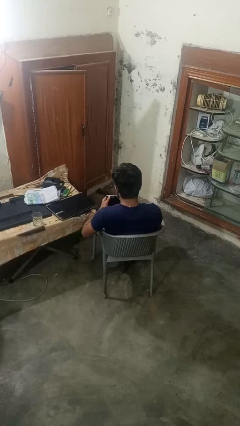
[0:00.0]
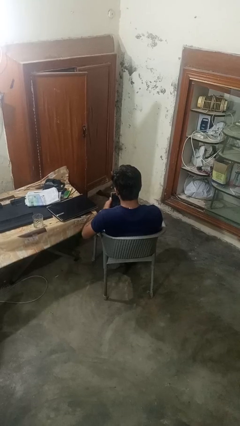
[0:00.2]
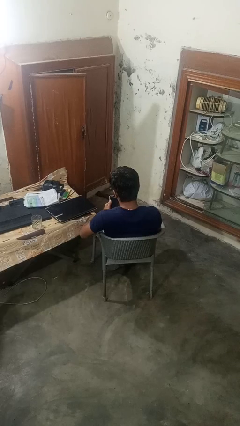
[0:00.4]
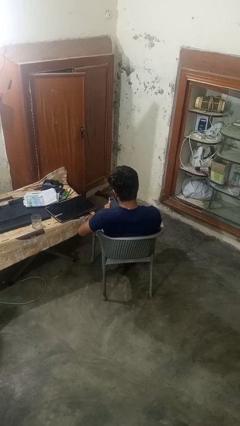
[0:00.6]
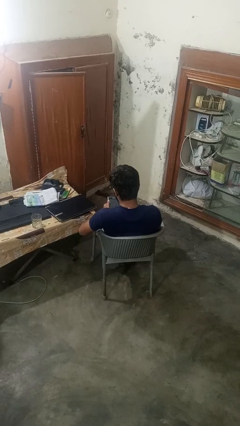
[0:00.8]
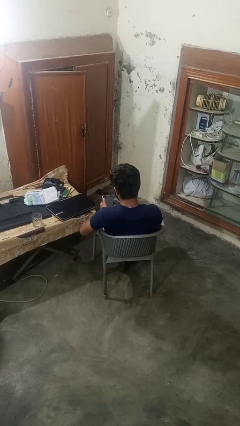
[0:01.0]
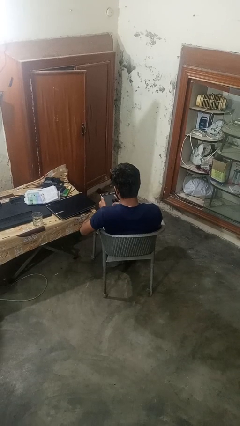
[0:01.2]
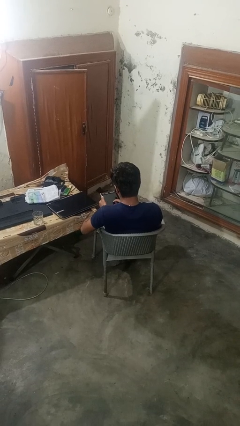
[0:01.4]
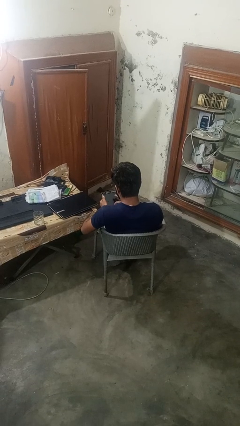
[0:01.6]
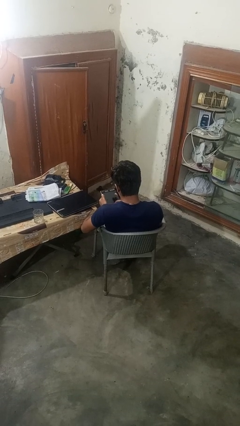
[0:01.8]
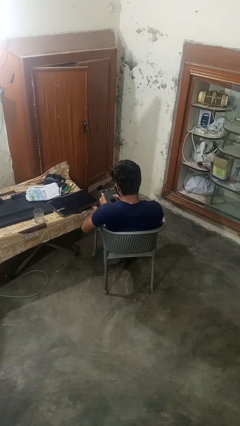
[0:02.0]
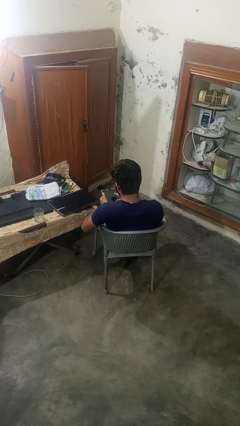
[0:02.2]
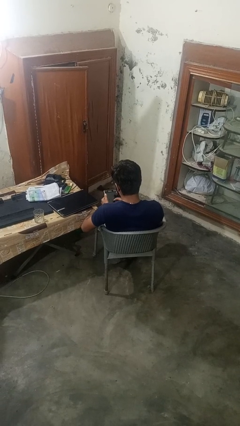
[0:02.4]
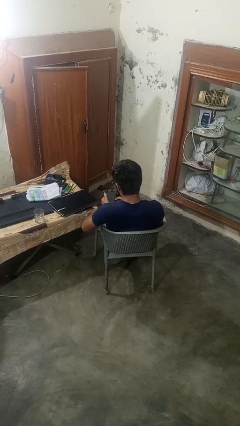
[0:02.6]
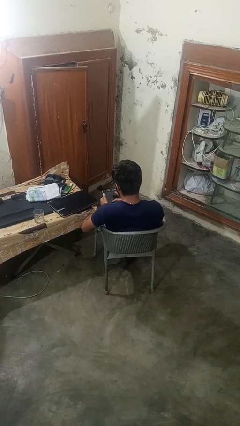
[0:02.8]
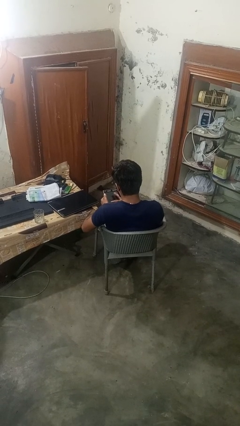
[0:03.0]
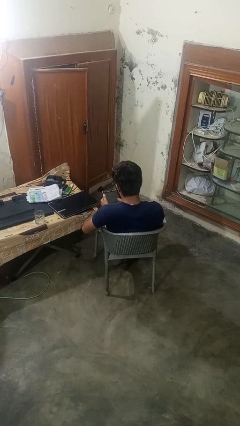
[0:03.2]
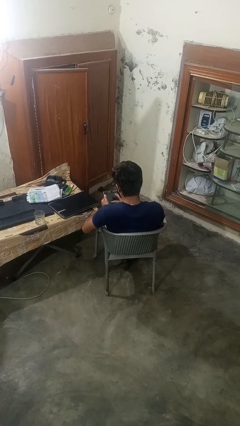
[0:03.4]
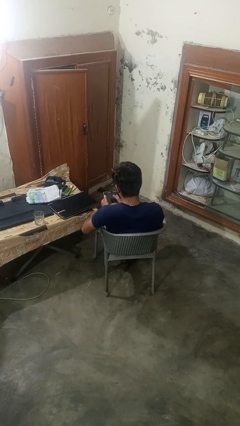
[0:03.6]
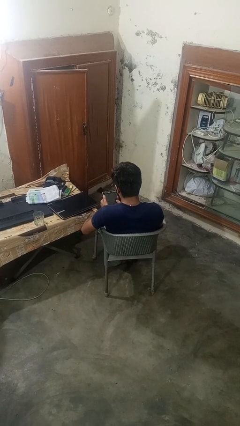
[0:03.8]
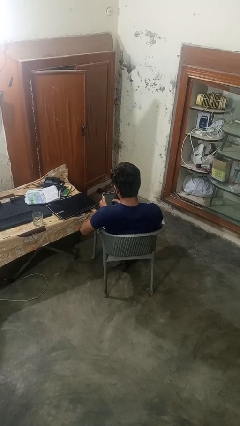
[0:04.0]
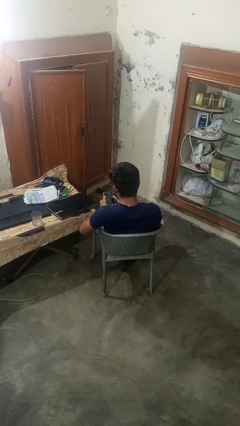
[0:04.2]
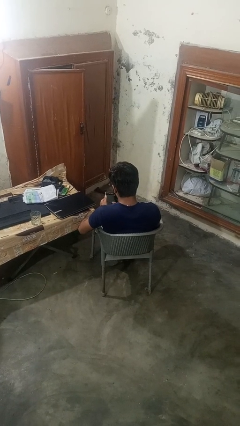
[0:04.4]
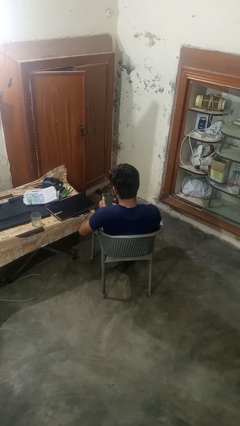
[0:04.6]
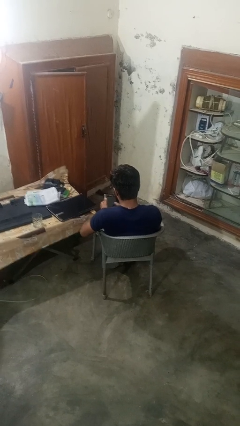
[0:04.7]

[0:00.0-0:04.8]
person interacts with tablet

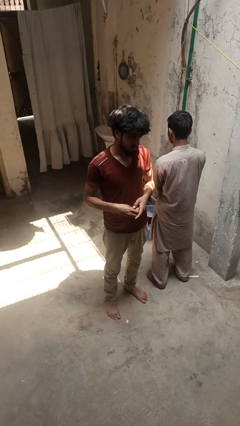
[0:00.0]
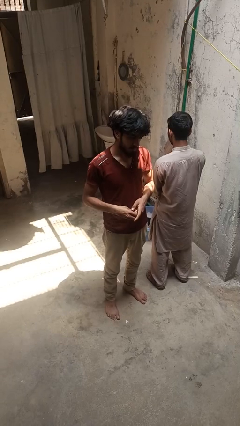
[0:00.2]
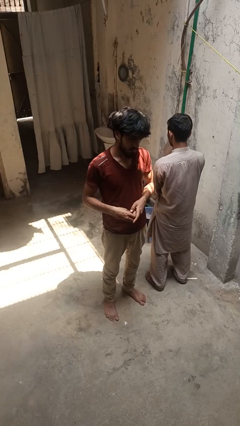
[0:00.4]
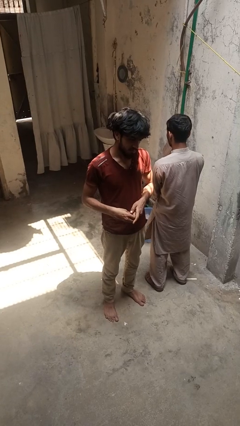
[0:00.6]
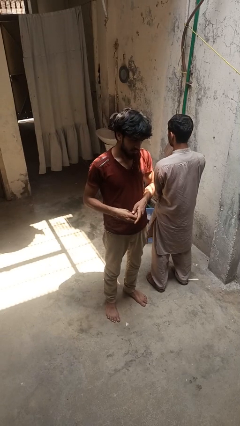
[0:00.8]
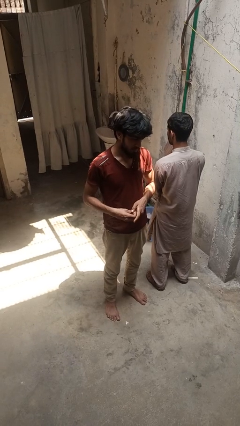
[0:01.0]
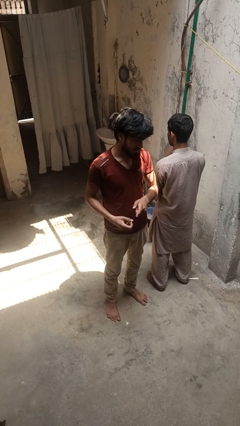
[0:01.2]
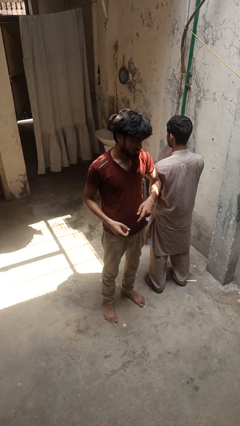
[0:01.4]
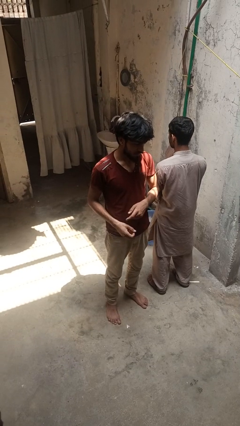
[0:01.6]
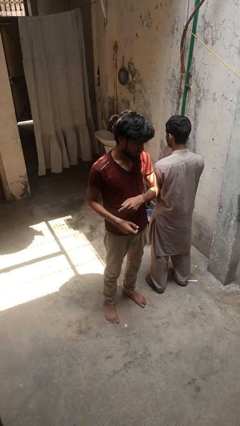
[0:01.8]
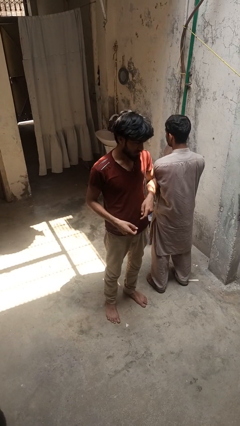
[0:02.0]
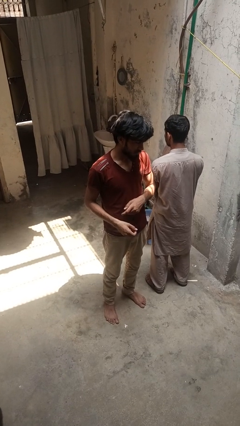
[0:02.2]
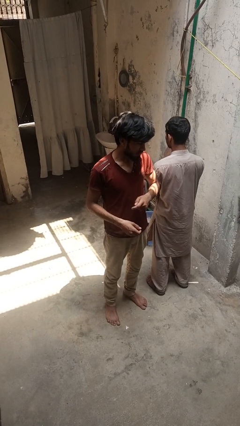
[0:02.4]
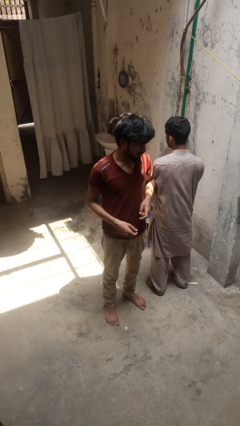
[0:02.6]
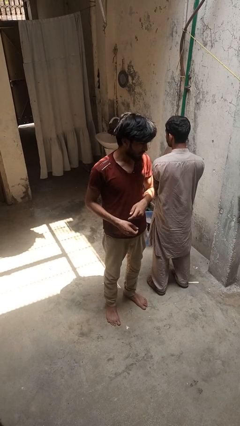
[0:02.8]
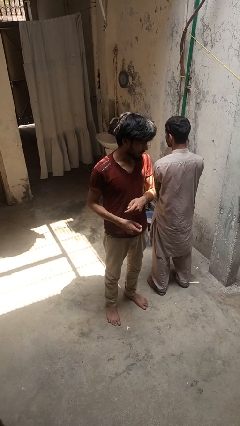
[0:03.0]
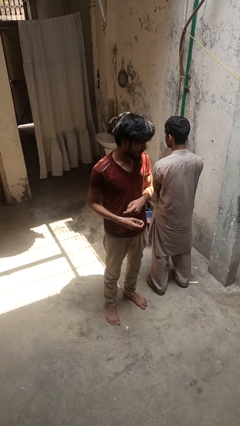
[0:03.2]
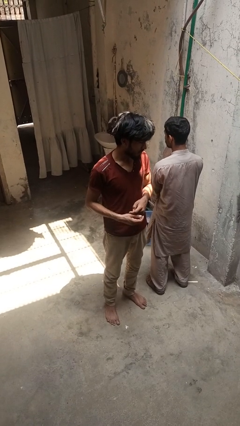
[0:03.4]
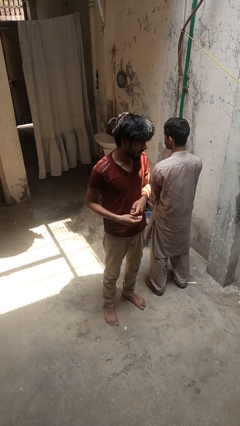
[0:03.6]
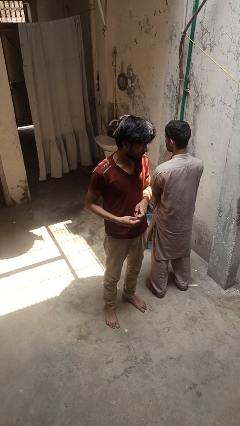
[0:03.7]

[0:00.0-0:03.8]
person nudges person with elbow

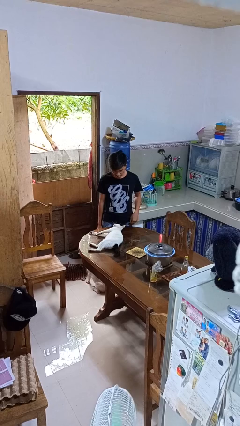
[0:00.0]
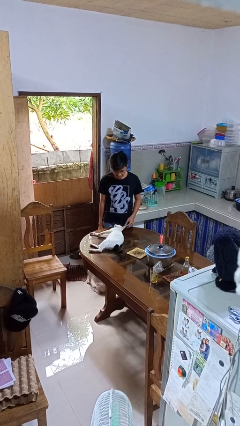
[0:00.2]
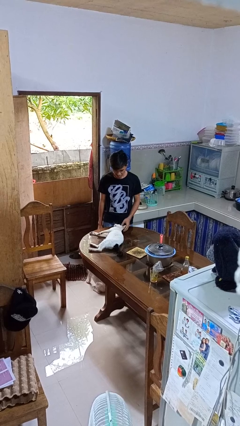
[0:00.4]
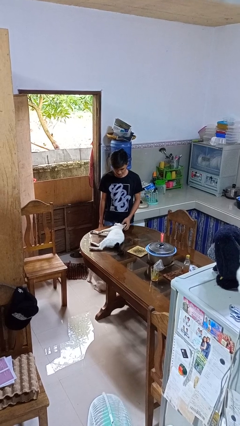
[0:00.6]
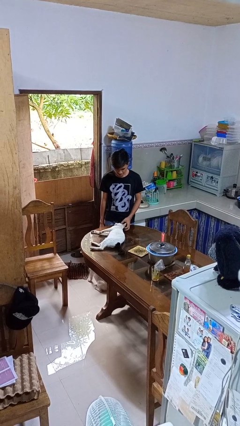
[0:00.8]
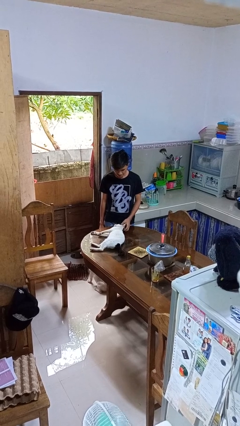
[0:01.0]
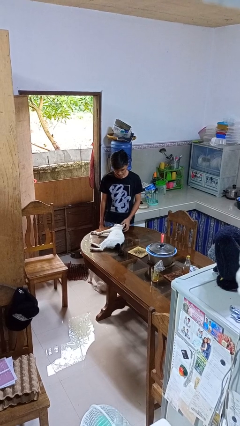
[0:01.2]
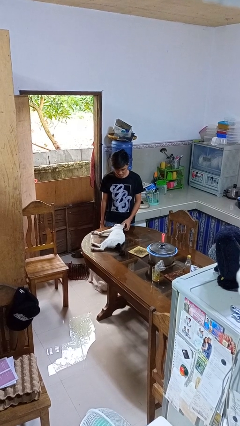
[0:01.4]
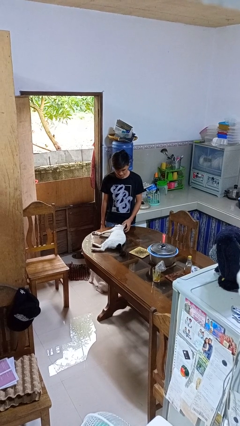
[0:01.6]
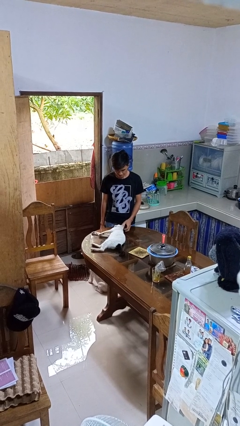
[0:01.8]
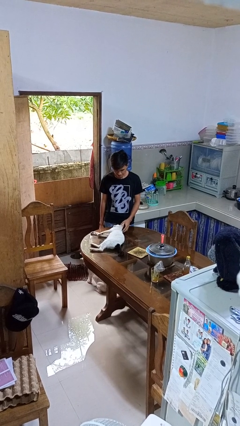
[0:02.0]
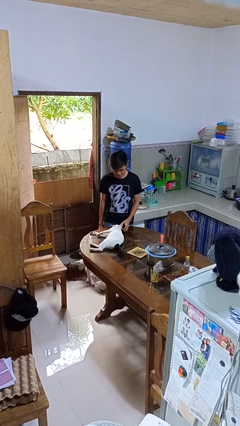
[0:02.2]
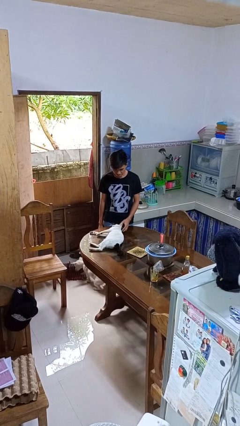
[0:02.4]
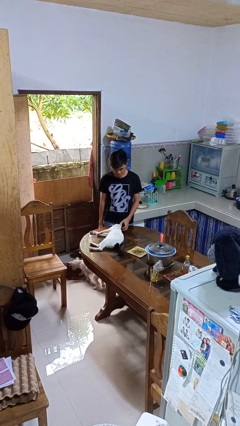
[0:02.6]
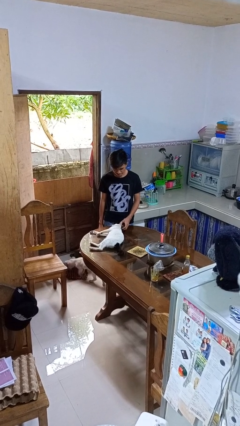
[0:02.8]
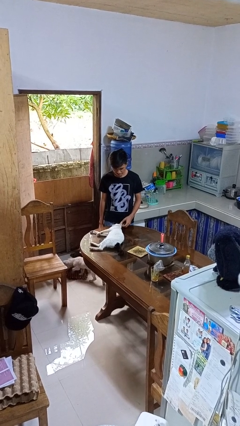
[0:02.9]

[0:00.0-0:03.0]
person pets cat

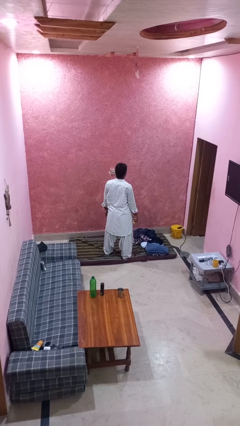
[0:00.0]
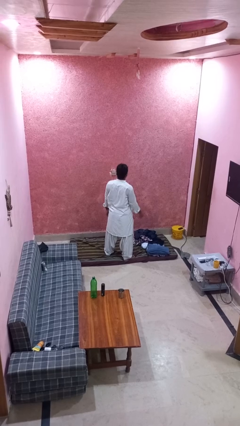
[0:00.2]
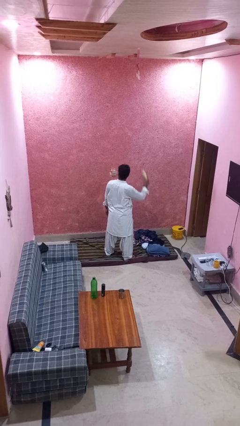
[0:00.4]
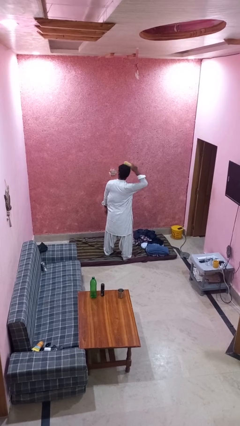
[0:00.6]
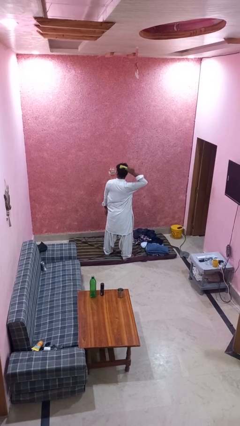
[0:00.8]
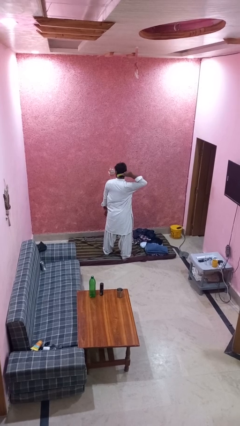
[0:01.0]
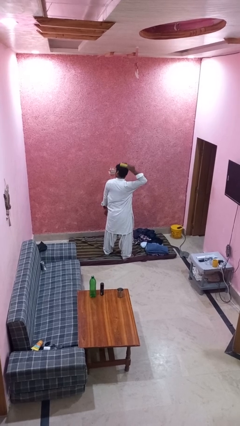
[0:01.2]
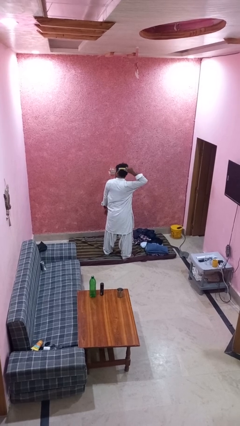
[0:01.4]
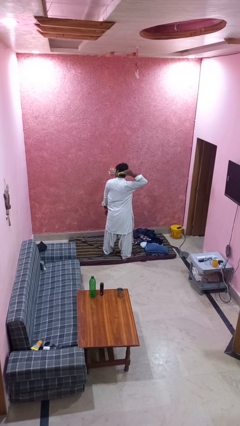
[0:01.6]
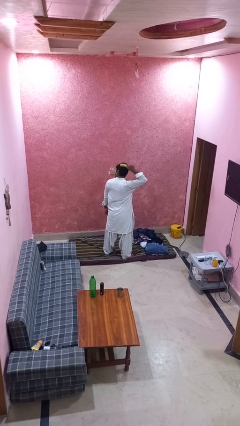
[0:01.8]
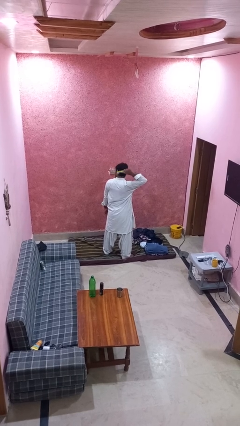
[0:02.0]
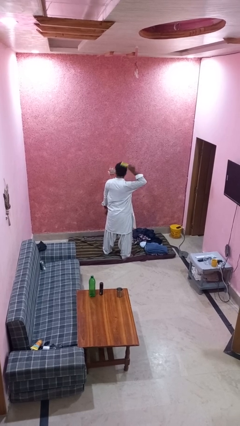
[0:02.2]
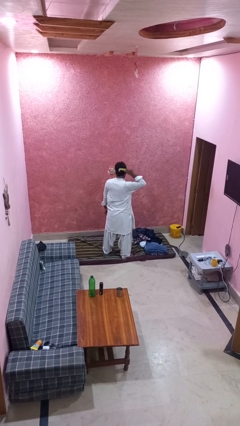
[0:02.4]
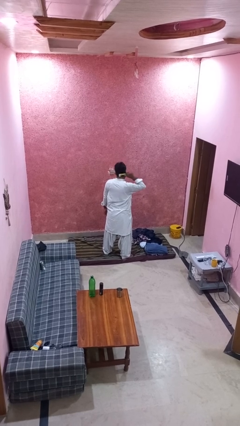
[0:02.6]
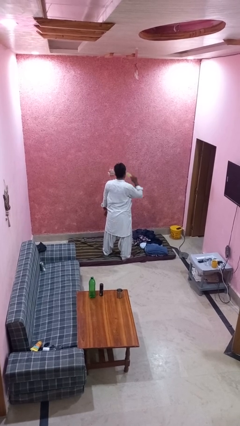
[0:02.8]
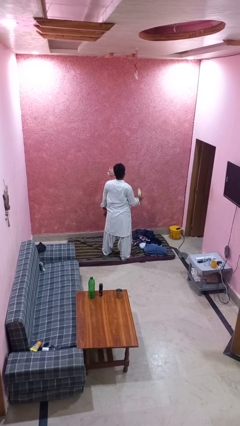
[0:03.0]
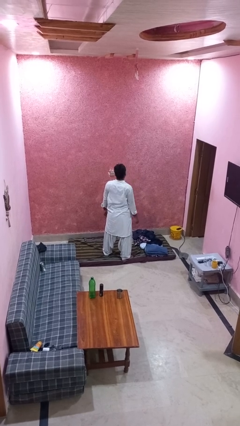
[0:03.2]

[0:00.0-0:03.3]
person brushes hair

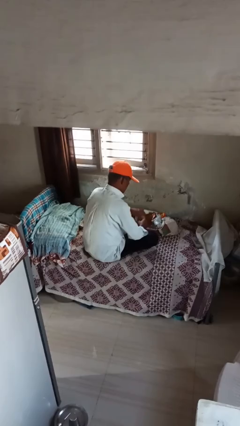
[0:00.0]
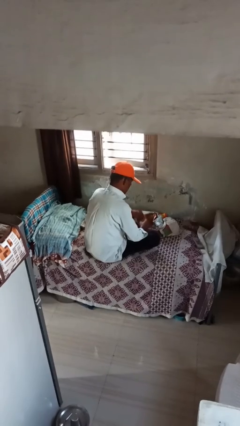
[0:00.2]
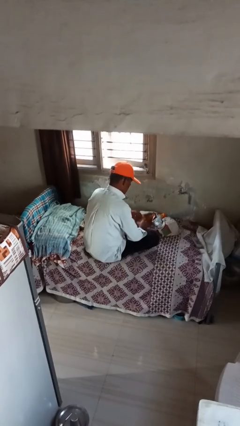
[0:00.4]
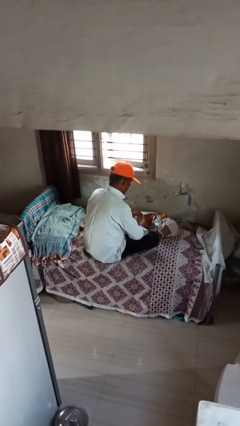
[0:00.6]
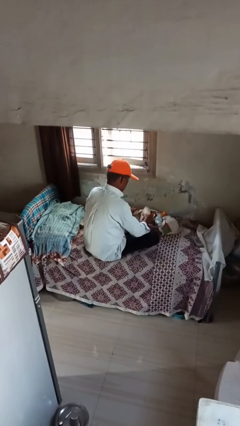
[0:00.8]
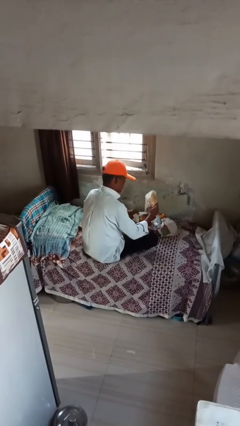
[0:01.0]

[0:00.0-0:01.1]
person takes object from bag

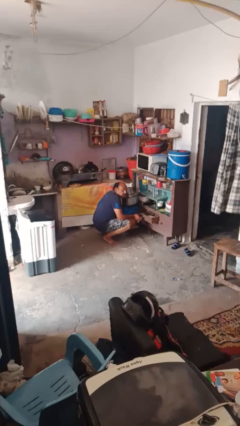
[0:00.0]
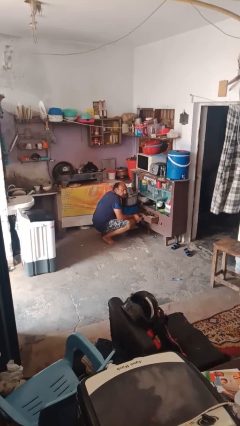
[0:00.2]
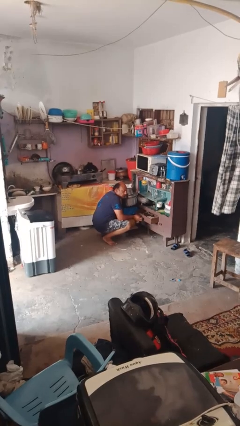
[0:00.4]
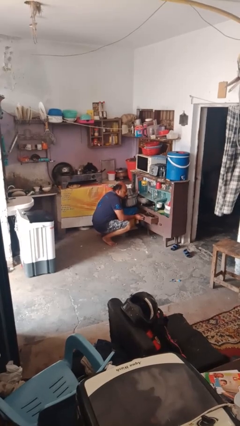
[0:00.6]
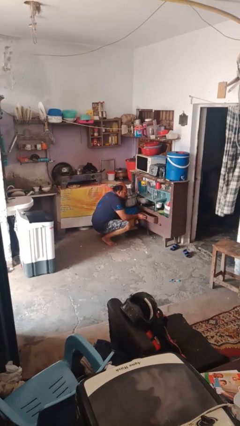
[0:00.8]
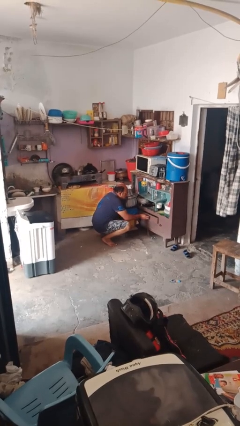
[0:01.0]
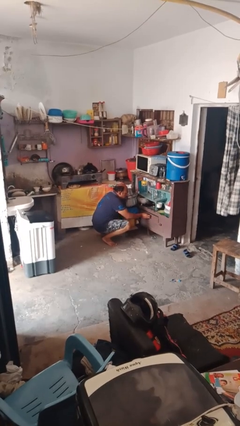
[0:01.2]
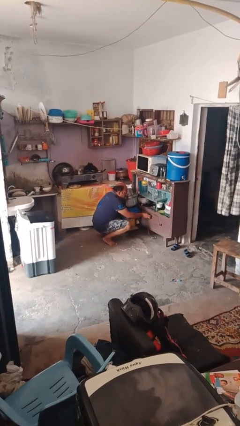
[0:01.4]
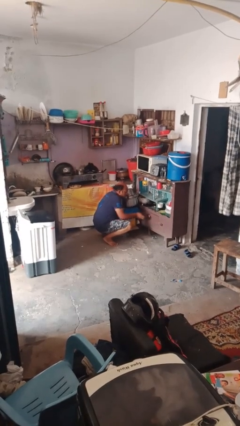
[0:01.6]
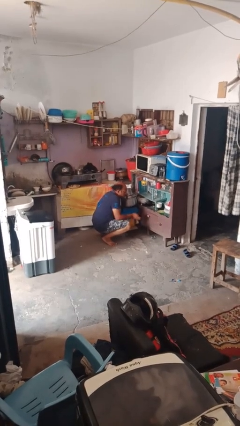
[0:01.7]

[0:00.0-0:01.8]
person closes kitchen drawer
